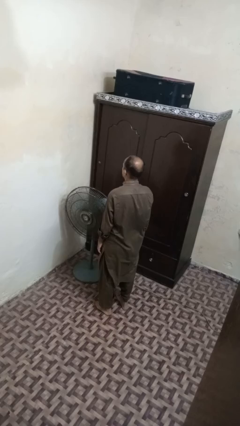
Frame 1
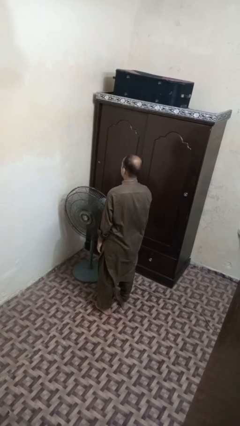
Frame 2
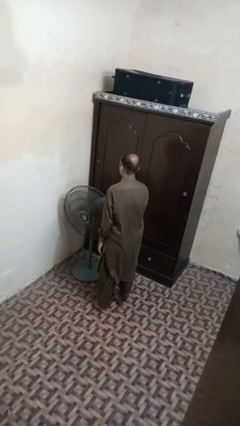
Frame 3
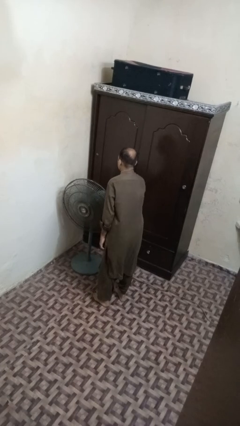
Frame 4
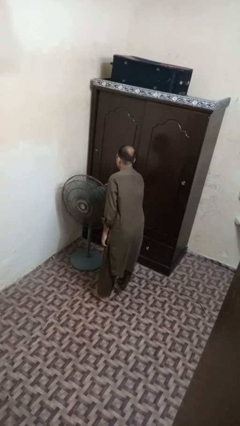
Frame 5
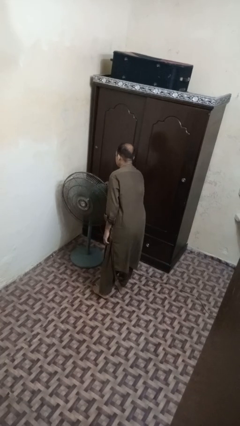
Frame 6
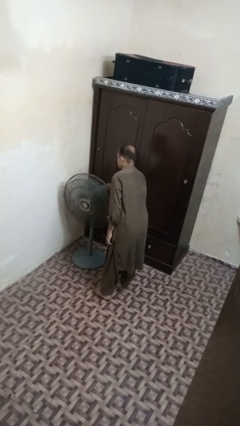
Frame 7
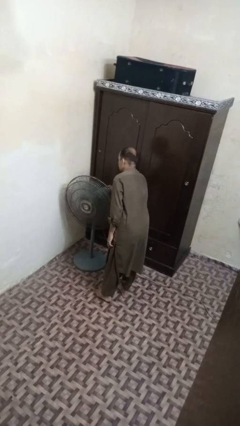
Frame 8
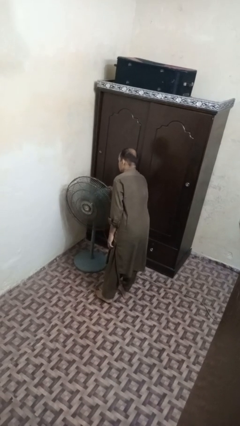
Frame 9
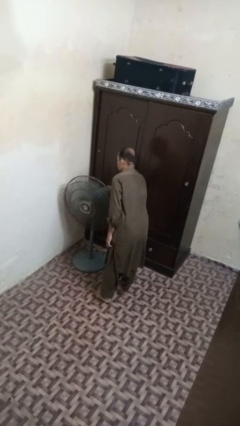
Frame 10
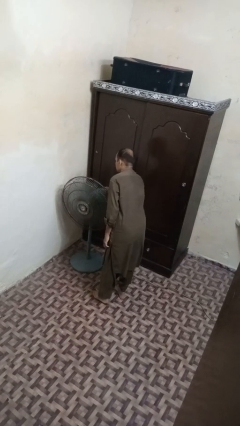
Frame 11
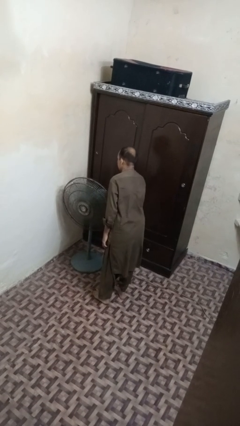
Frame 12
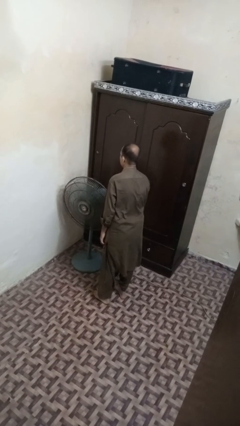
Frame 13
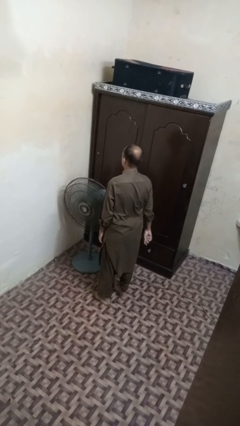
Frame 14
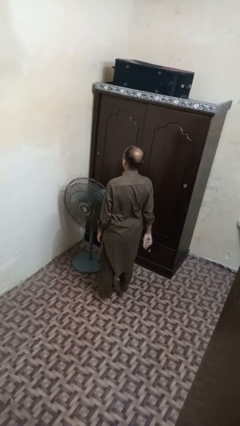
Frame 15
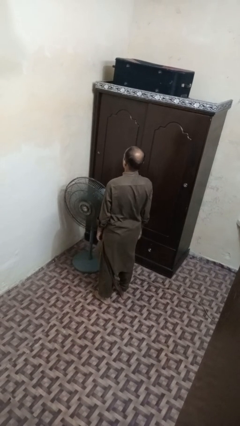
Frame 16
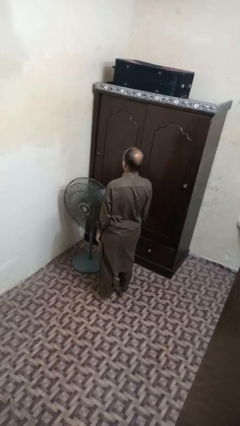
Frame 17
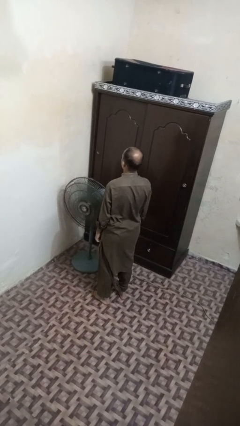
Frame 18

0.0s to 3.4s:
person turns on fan

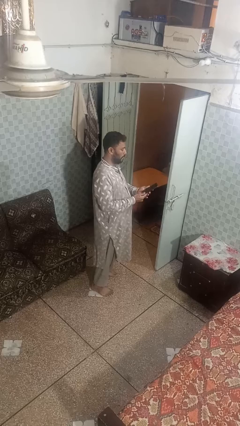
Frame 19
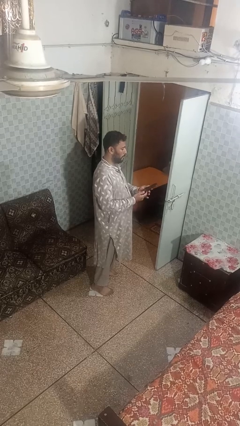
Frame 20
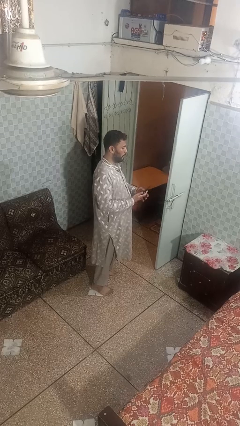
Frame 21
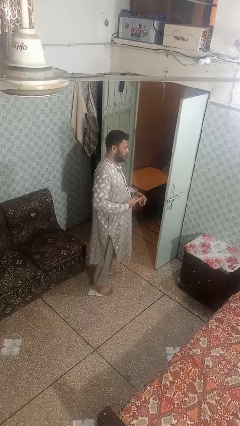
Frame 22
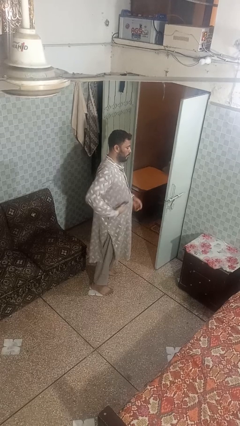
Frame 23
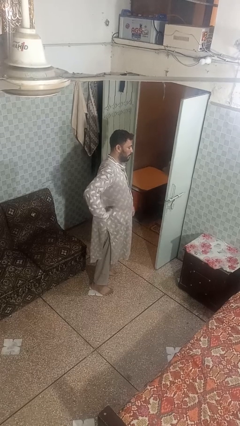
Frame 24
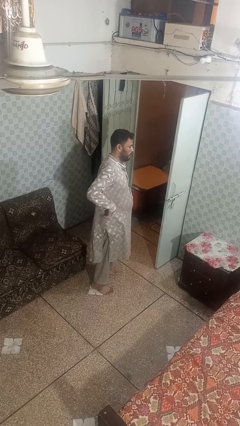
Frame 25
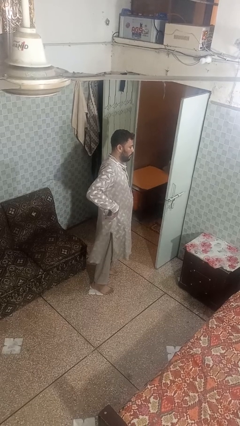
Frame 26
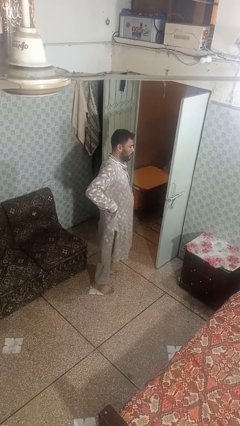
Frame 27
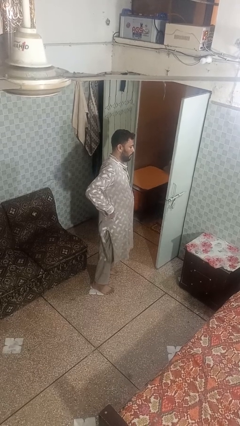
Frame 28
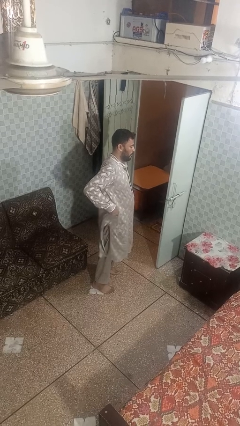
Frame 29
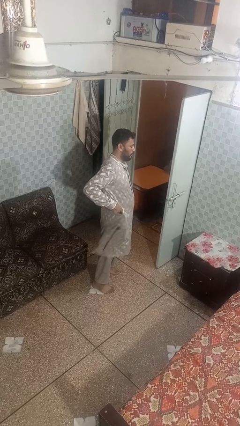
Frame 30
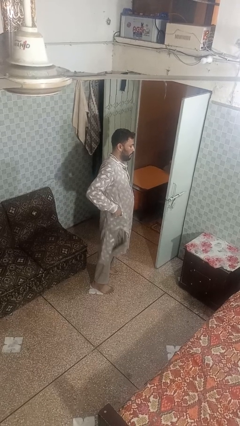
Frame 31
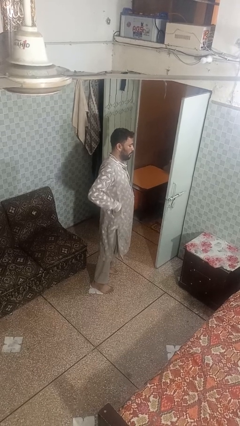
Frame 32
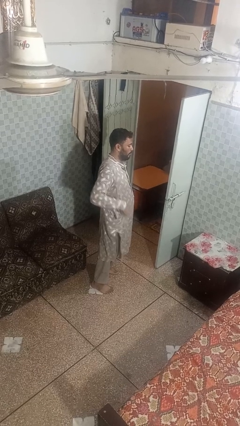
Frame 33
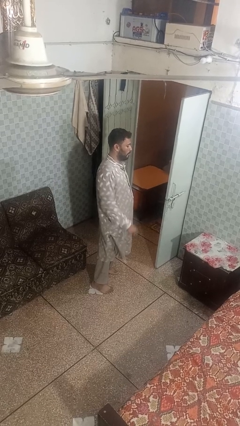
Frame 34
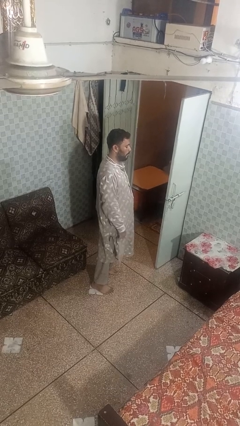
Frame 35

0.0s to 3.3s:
person puts phone into pocket

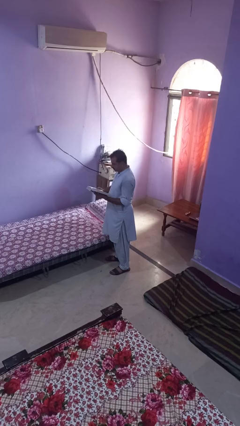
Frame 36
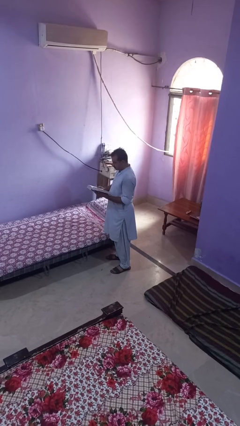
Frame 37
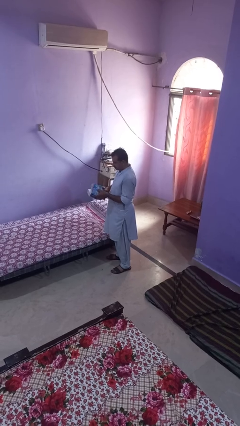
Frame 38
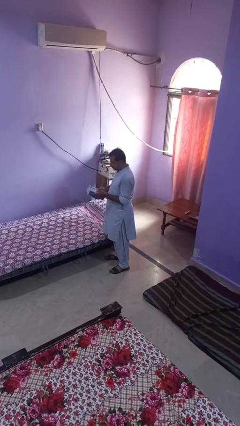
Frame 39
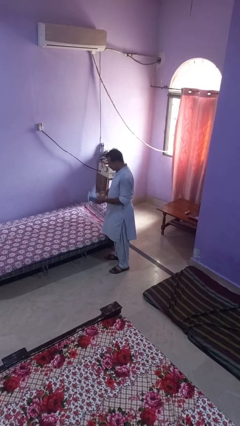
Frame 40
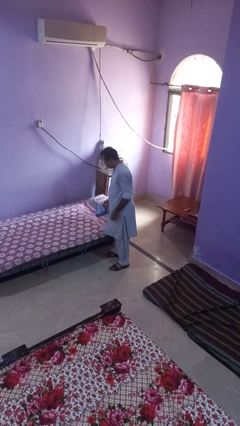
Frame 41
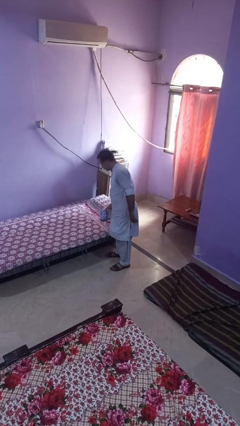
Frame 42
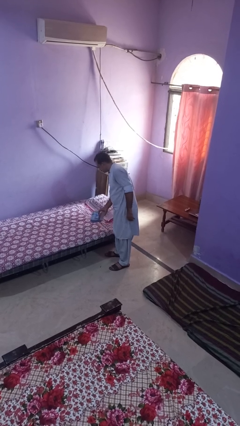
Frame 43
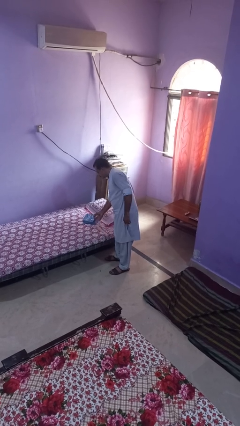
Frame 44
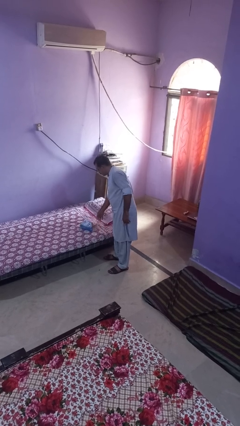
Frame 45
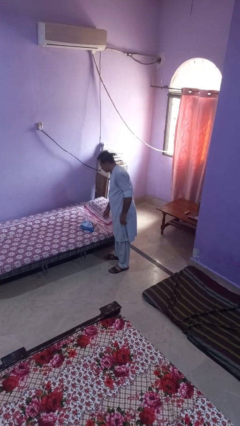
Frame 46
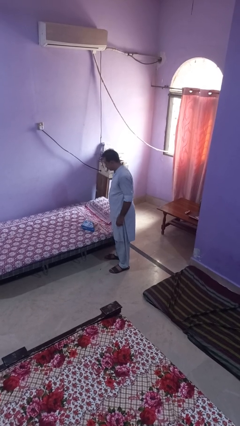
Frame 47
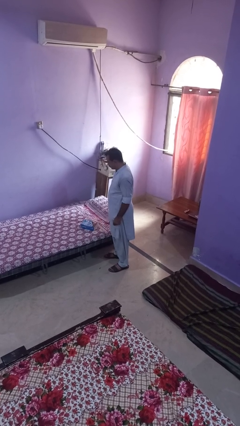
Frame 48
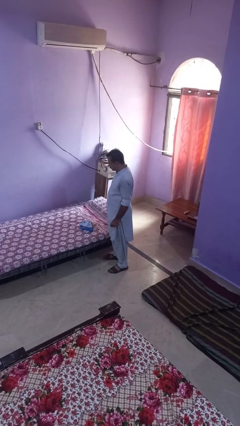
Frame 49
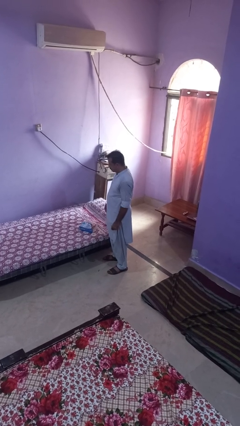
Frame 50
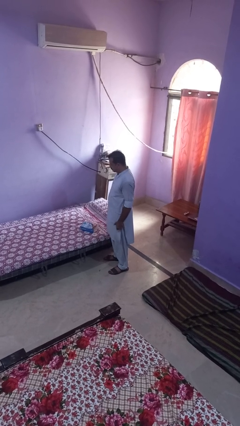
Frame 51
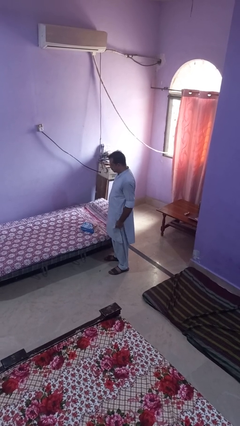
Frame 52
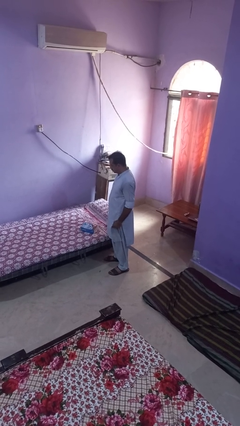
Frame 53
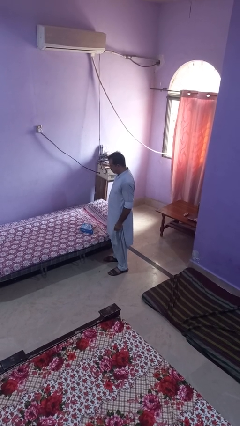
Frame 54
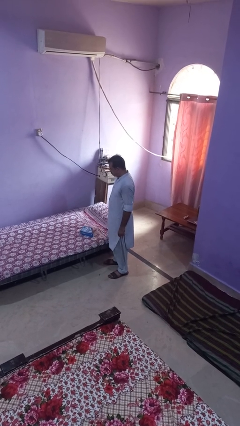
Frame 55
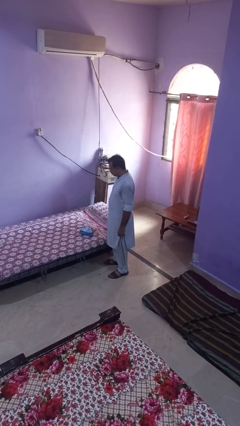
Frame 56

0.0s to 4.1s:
person puts down object on bed

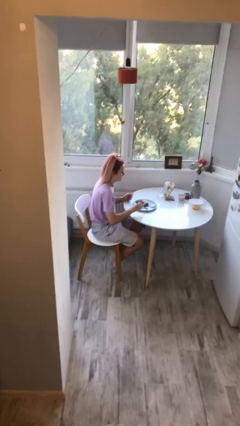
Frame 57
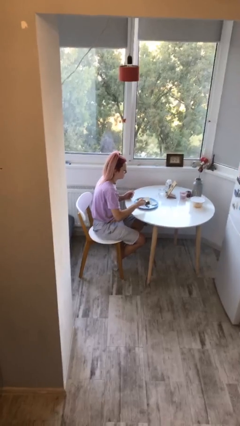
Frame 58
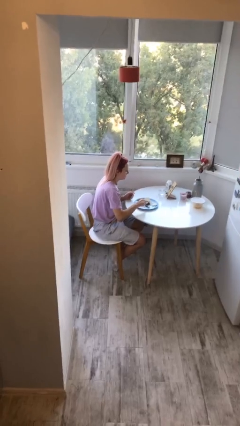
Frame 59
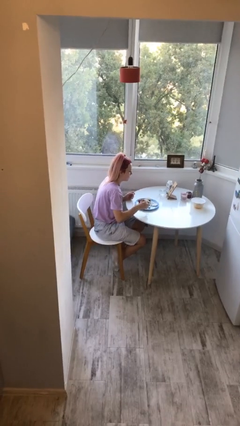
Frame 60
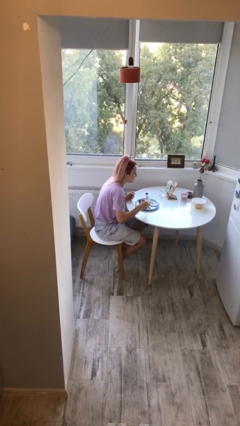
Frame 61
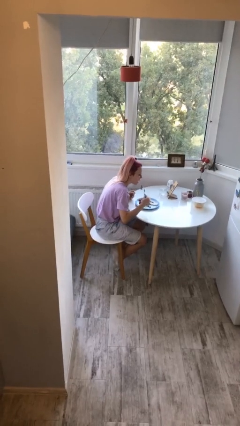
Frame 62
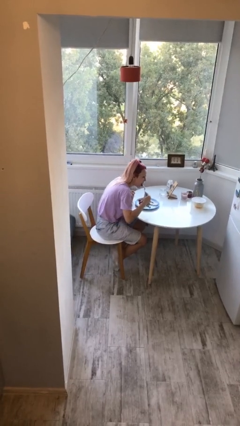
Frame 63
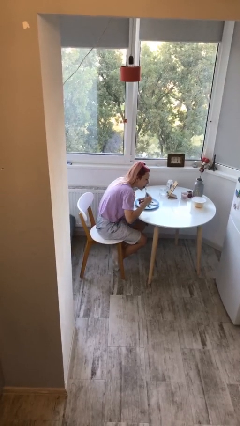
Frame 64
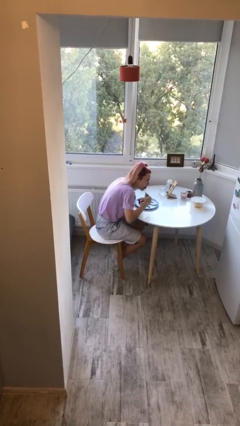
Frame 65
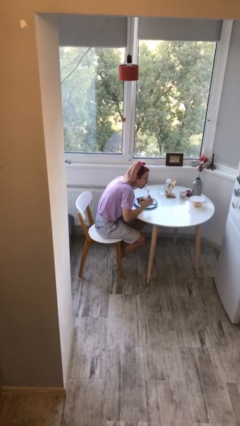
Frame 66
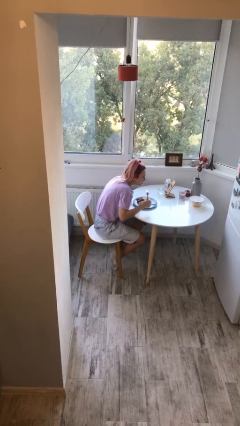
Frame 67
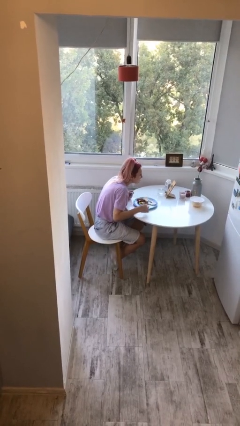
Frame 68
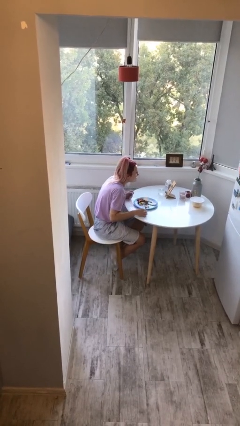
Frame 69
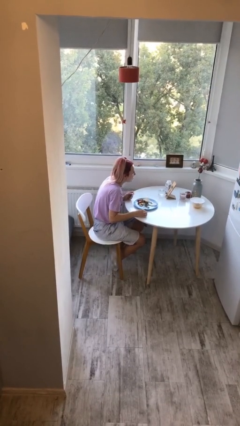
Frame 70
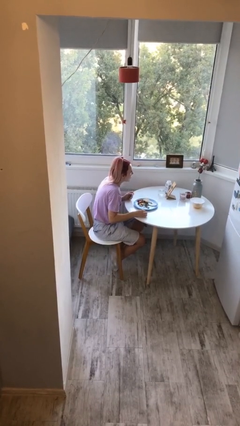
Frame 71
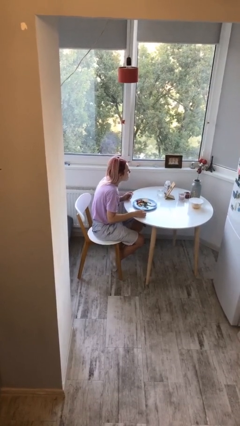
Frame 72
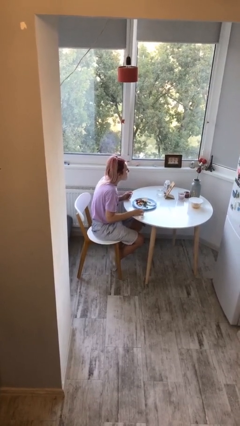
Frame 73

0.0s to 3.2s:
person eats with utensil

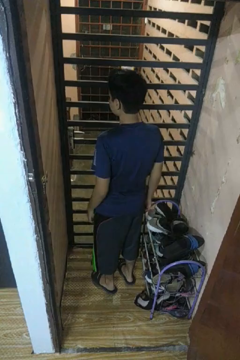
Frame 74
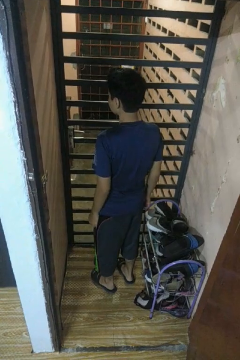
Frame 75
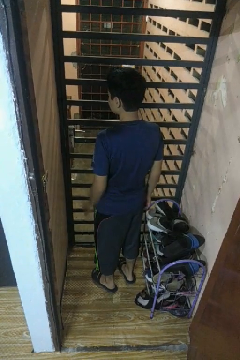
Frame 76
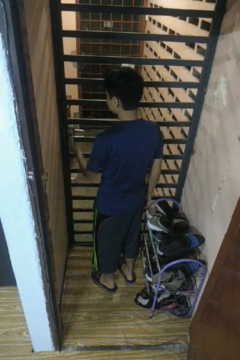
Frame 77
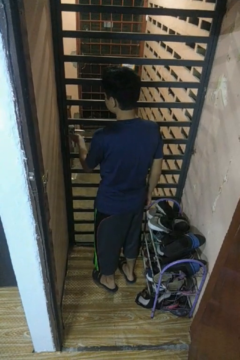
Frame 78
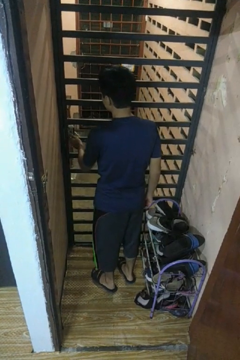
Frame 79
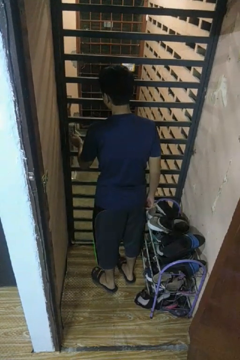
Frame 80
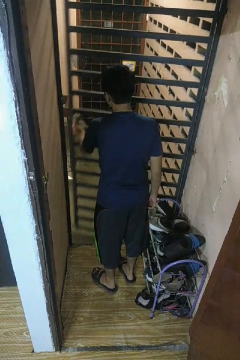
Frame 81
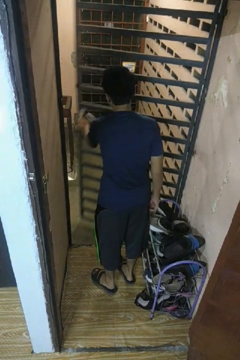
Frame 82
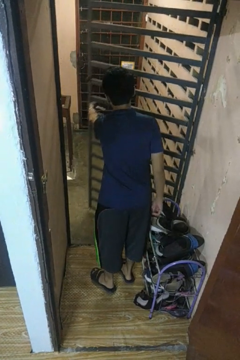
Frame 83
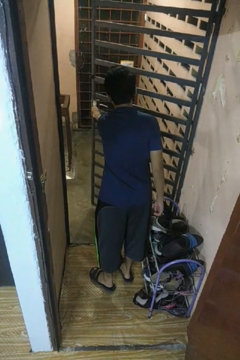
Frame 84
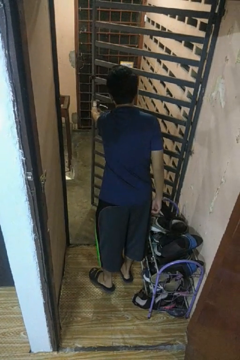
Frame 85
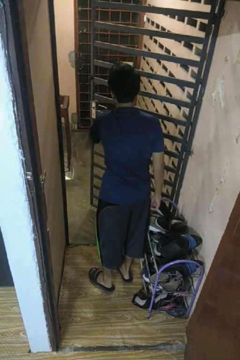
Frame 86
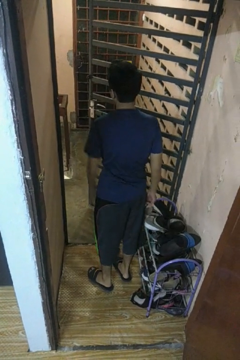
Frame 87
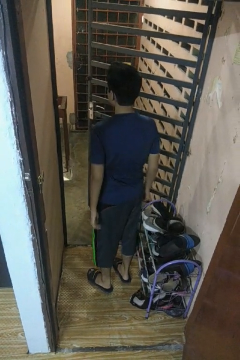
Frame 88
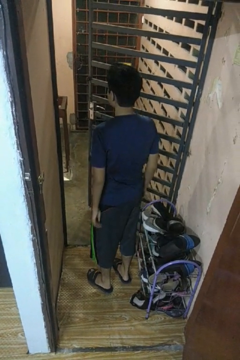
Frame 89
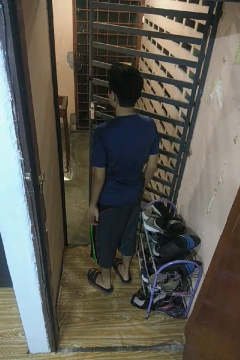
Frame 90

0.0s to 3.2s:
person opens gate

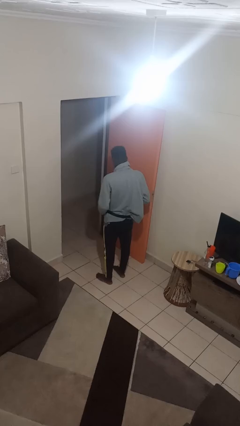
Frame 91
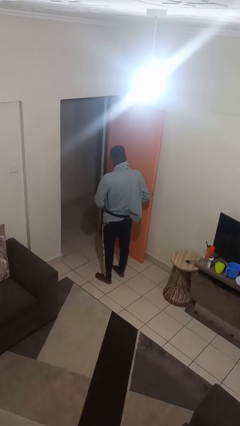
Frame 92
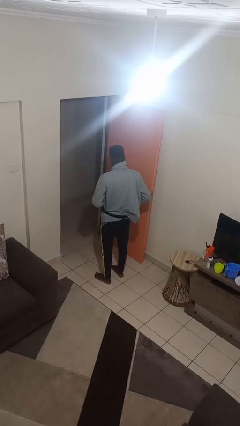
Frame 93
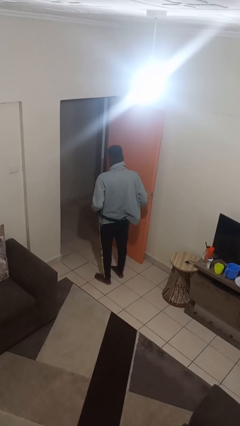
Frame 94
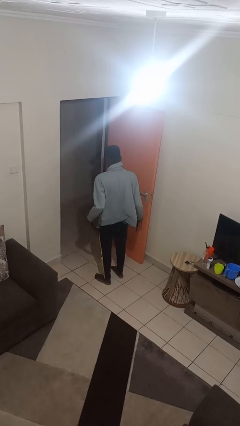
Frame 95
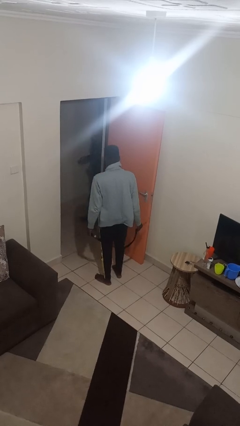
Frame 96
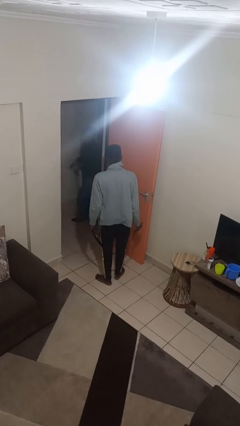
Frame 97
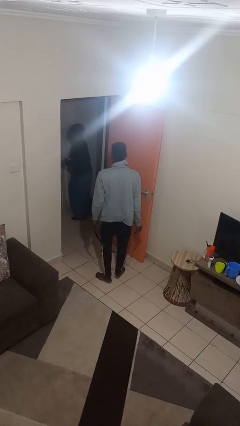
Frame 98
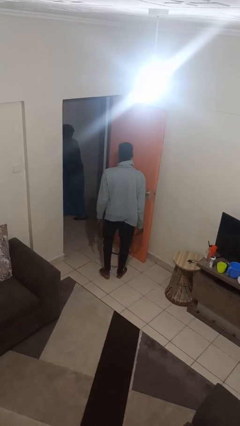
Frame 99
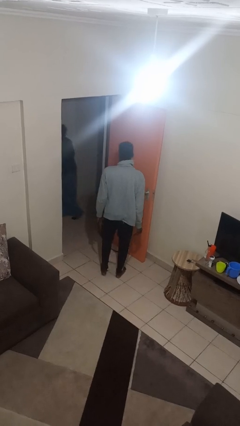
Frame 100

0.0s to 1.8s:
person takes off belt
